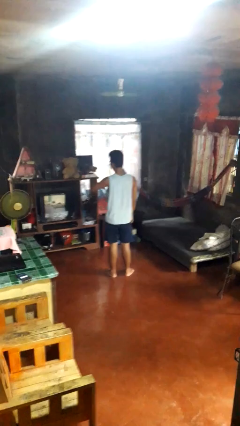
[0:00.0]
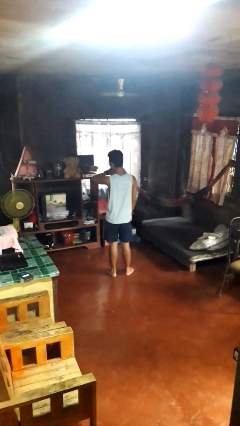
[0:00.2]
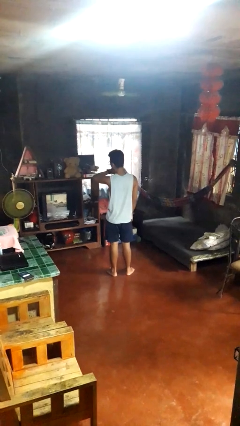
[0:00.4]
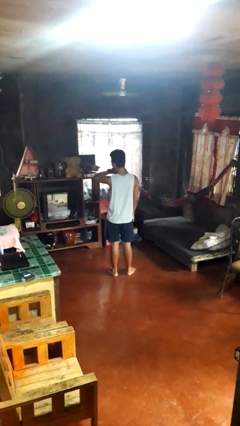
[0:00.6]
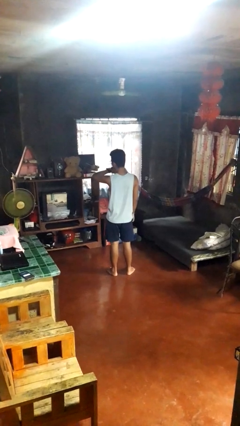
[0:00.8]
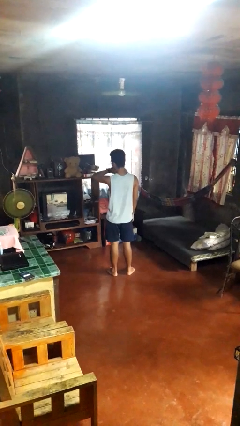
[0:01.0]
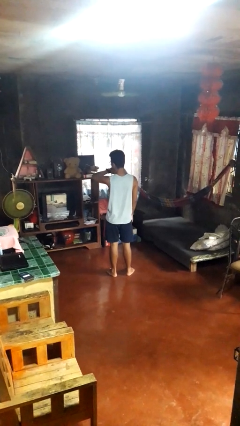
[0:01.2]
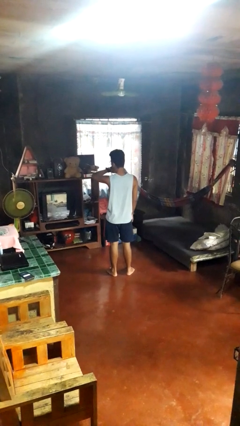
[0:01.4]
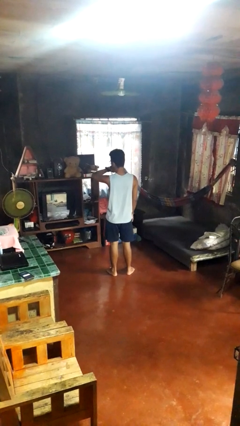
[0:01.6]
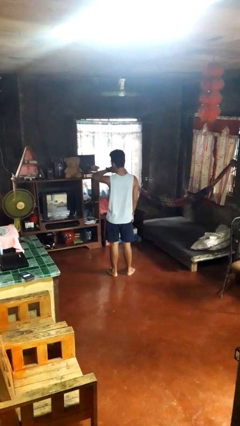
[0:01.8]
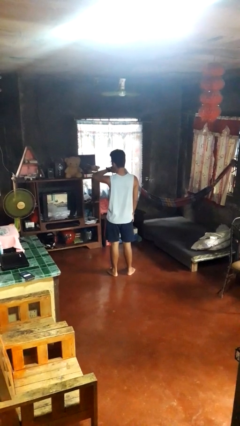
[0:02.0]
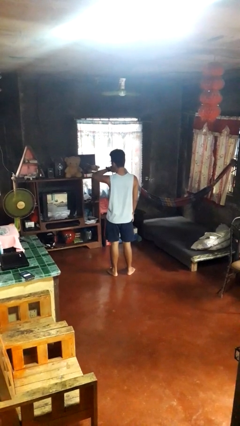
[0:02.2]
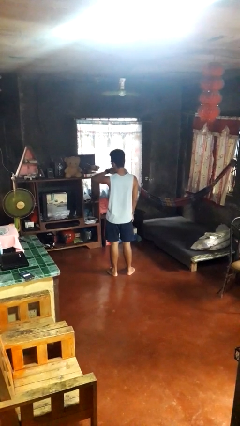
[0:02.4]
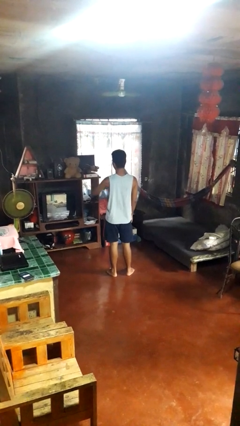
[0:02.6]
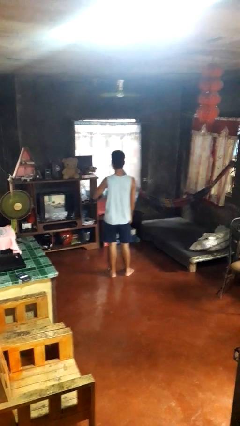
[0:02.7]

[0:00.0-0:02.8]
person looks at wristwatch

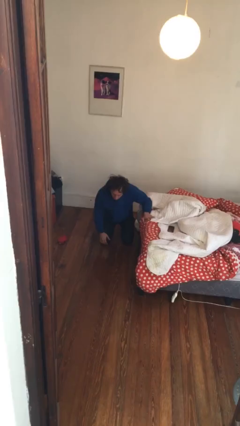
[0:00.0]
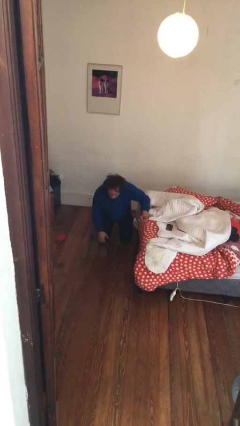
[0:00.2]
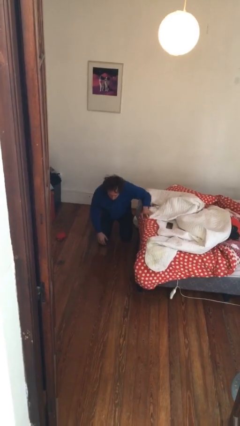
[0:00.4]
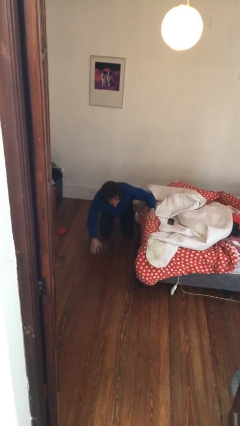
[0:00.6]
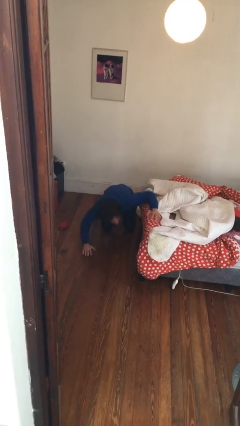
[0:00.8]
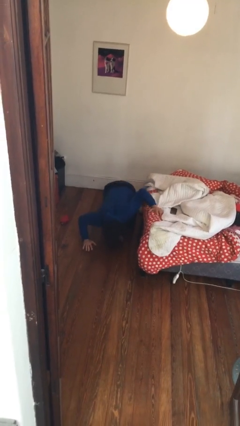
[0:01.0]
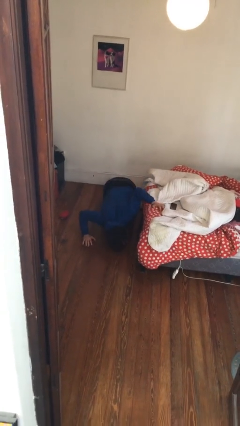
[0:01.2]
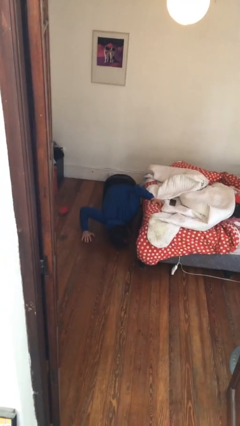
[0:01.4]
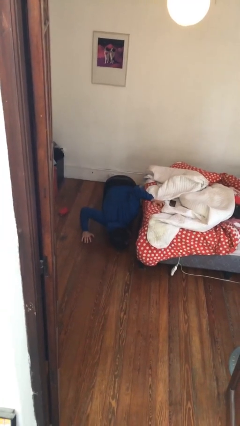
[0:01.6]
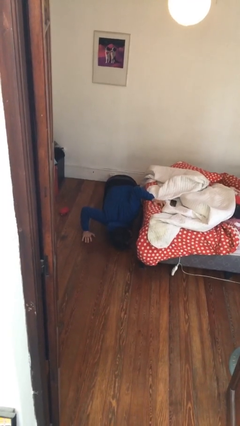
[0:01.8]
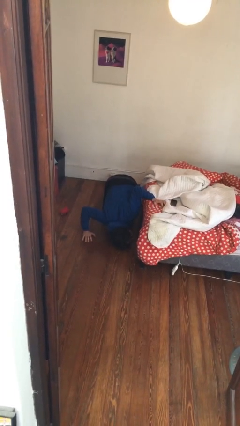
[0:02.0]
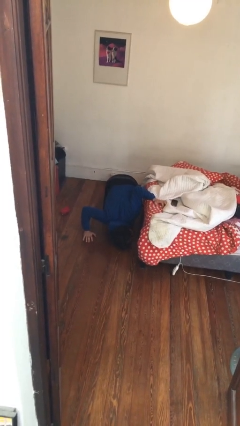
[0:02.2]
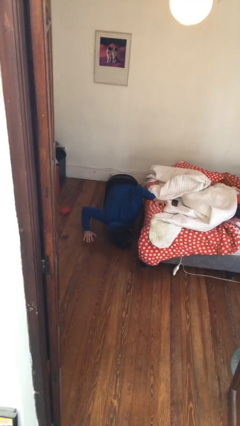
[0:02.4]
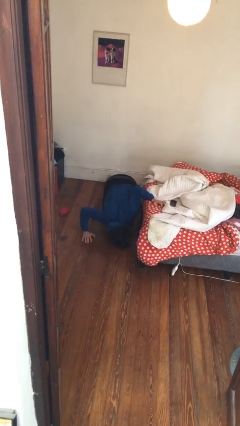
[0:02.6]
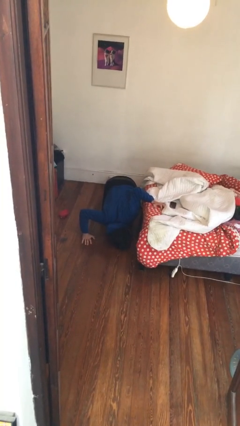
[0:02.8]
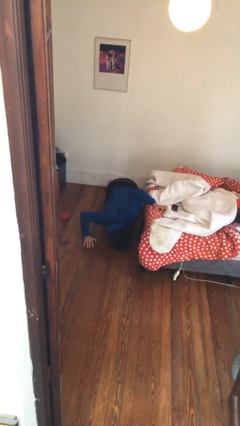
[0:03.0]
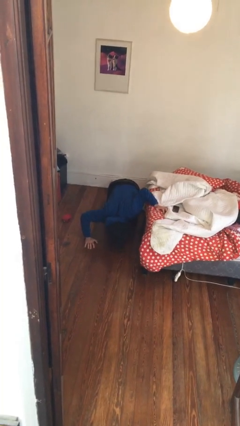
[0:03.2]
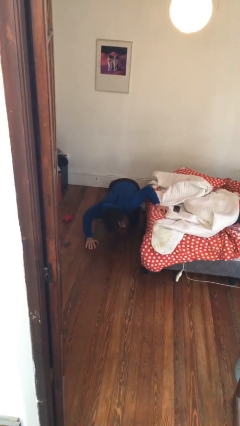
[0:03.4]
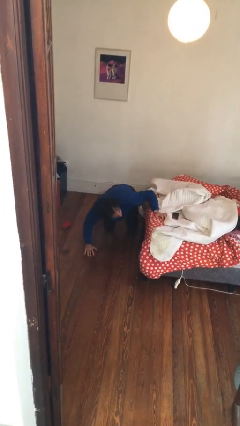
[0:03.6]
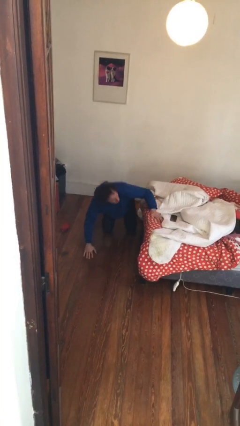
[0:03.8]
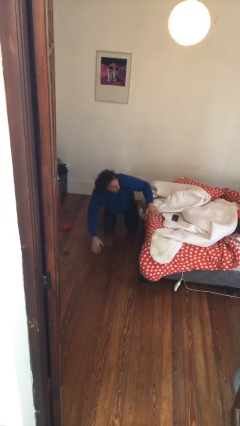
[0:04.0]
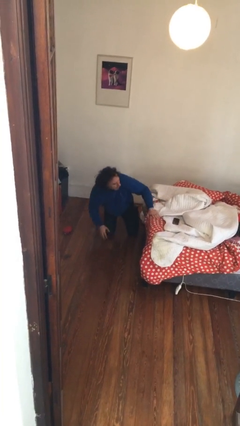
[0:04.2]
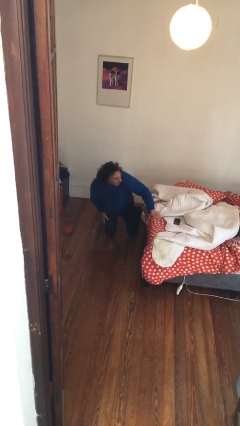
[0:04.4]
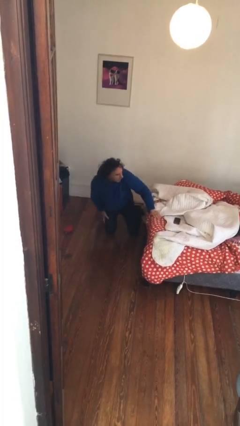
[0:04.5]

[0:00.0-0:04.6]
person searches under bed

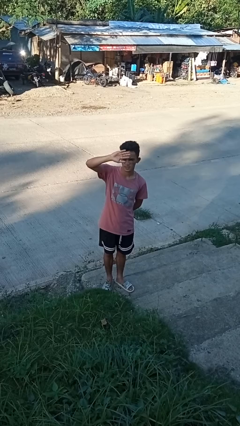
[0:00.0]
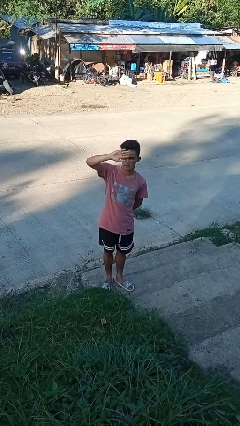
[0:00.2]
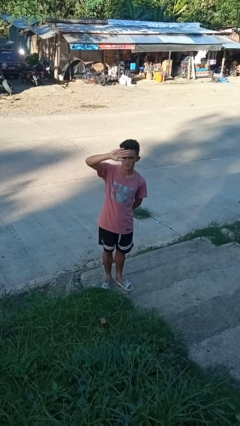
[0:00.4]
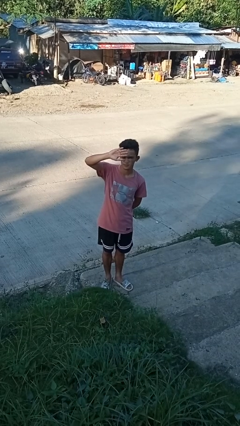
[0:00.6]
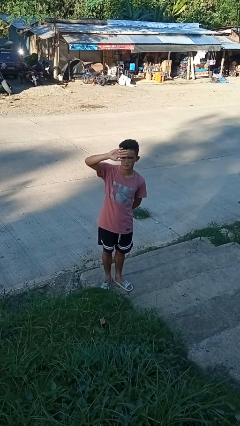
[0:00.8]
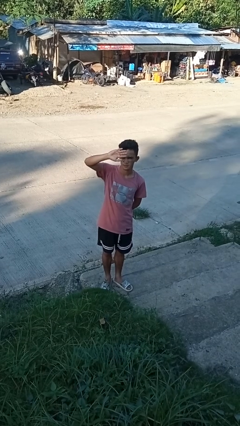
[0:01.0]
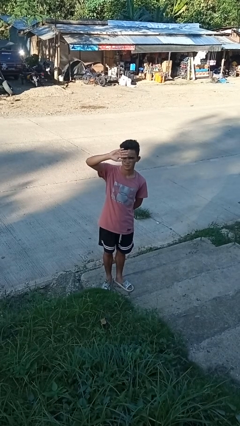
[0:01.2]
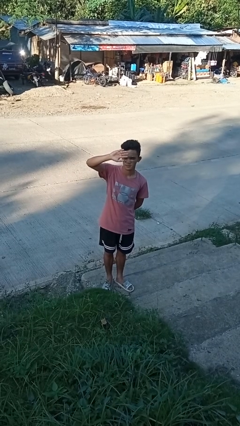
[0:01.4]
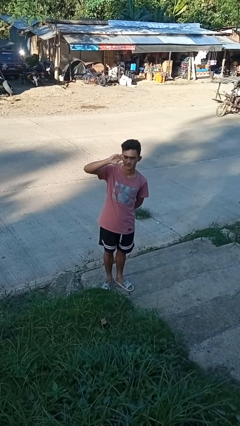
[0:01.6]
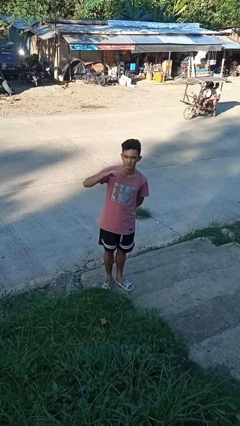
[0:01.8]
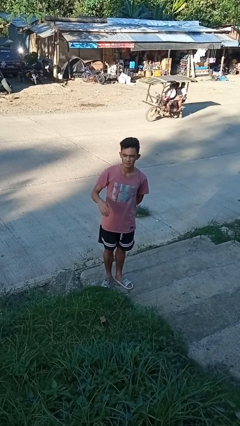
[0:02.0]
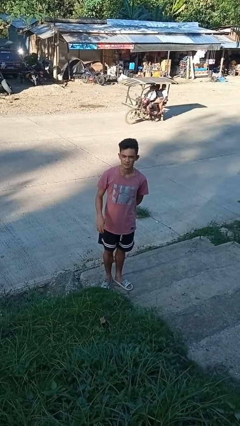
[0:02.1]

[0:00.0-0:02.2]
person shades eyes

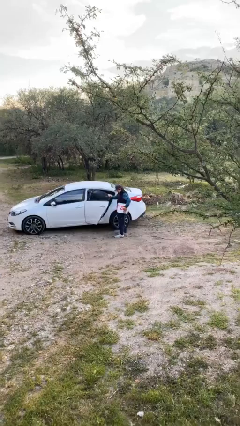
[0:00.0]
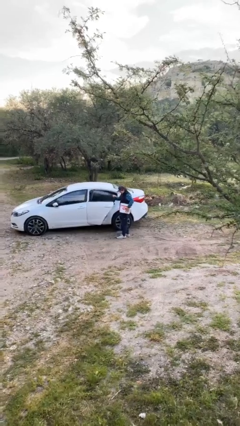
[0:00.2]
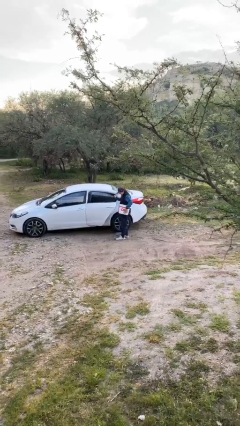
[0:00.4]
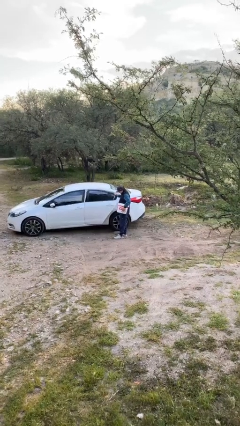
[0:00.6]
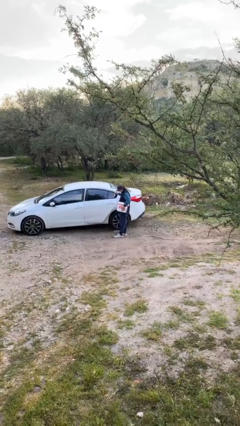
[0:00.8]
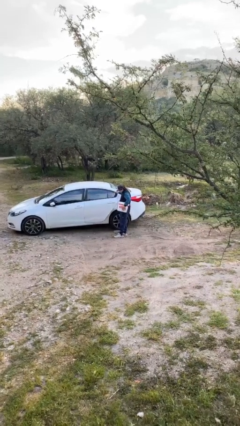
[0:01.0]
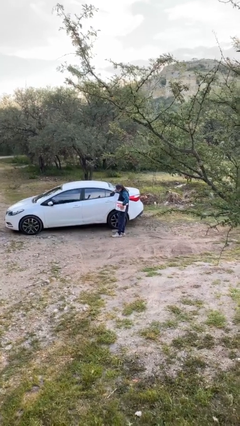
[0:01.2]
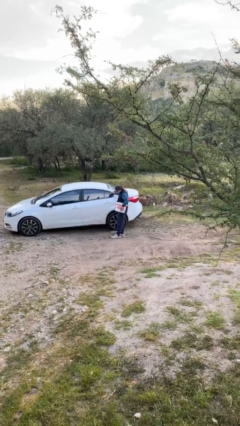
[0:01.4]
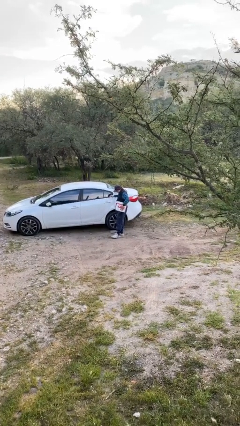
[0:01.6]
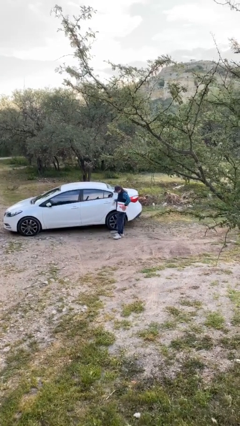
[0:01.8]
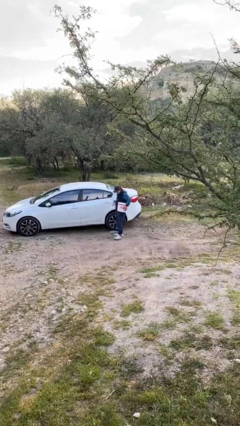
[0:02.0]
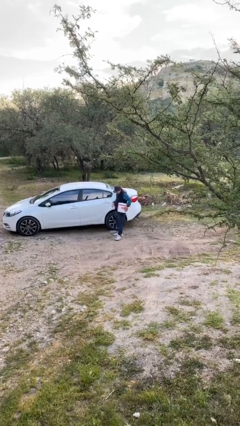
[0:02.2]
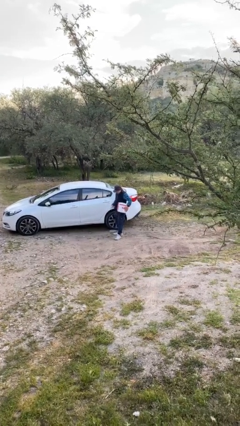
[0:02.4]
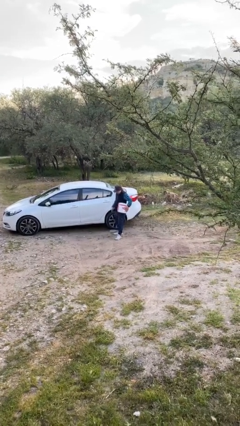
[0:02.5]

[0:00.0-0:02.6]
person closes car door

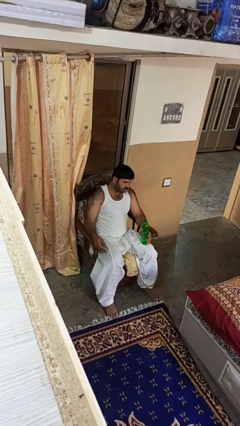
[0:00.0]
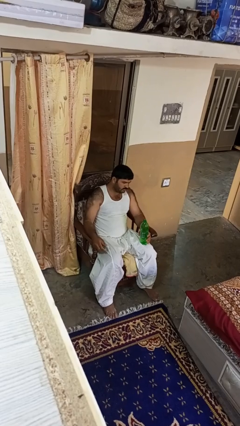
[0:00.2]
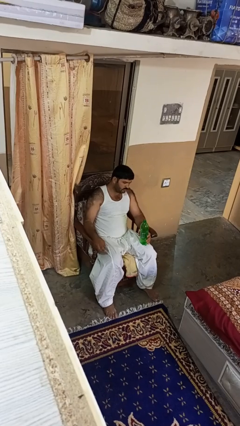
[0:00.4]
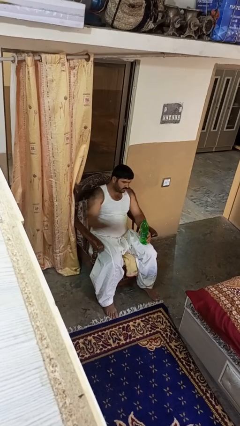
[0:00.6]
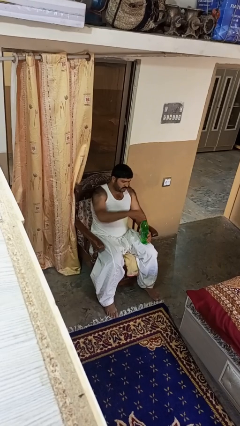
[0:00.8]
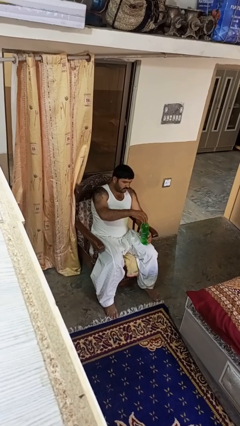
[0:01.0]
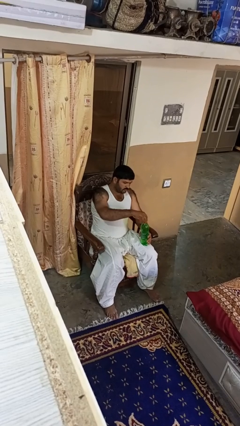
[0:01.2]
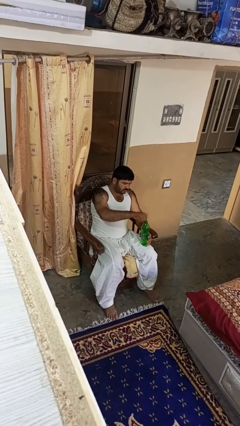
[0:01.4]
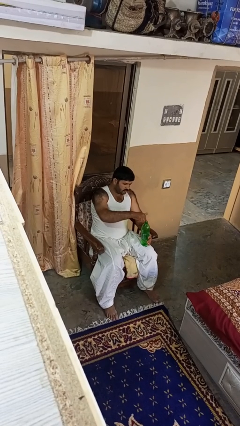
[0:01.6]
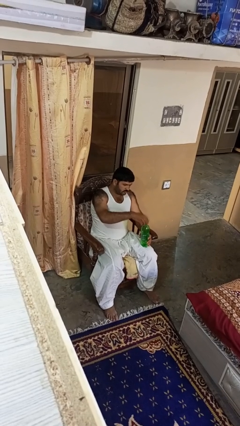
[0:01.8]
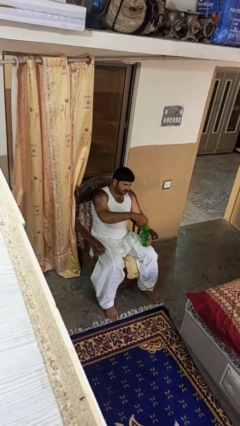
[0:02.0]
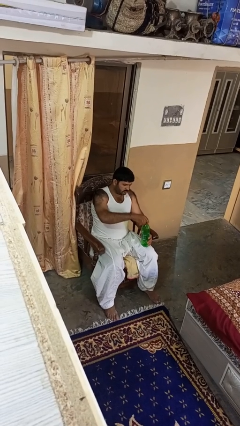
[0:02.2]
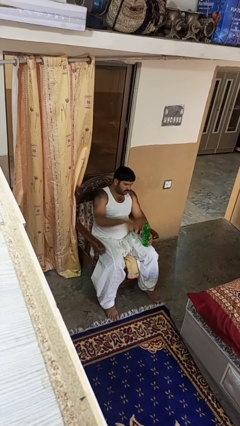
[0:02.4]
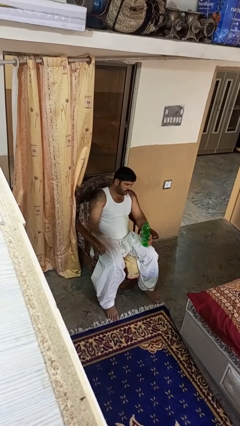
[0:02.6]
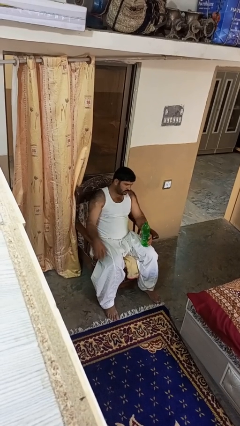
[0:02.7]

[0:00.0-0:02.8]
person screws lid to bottle

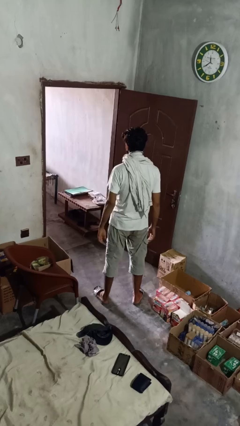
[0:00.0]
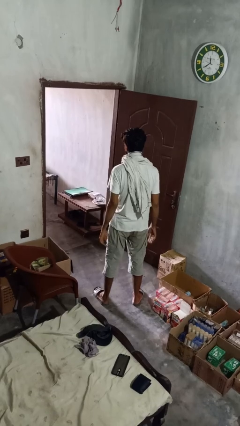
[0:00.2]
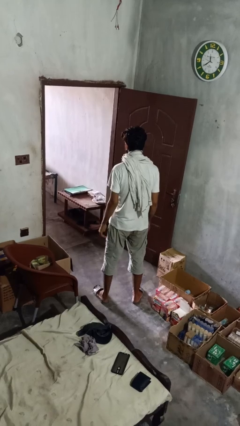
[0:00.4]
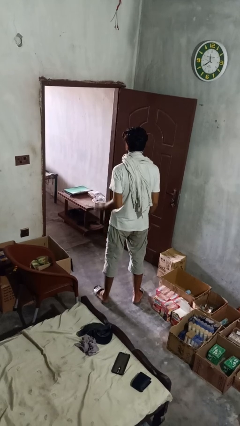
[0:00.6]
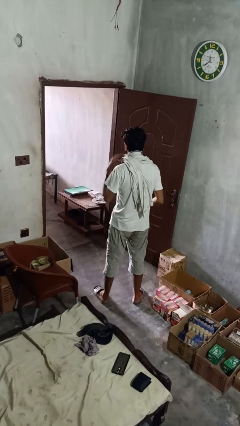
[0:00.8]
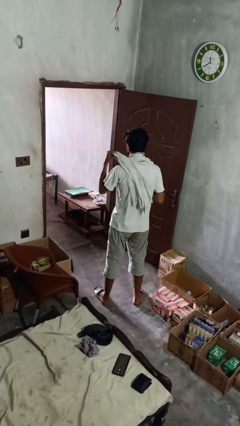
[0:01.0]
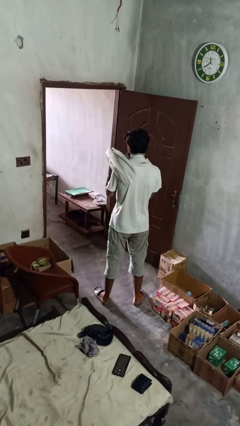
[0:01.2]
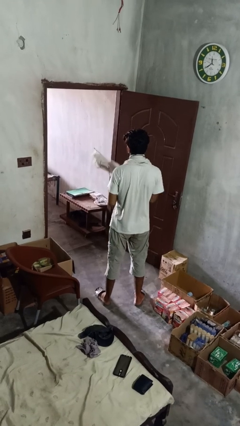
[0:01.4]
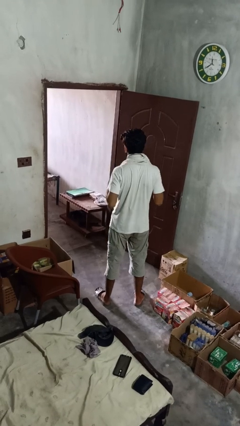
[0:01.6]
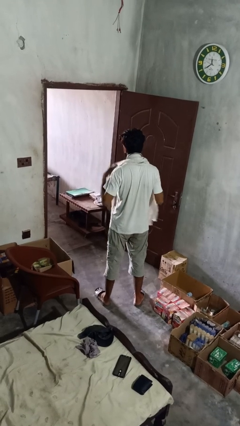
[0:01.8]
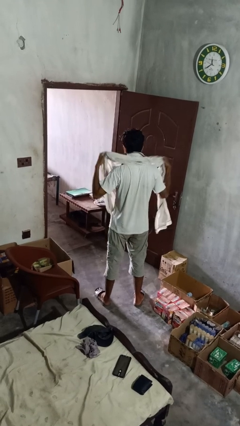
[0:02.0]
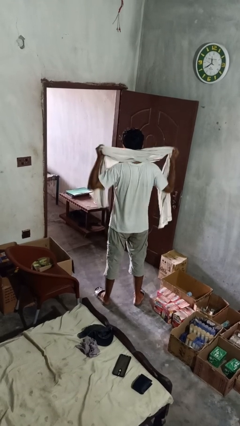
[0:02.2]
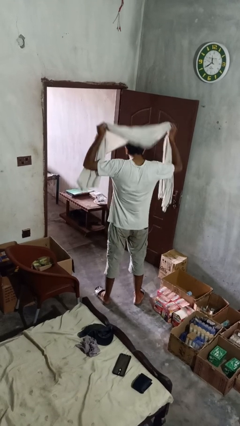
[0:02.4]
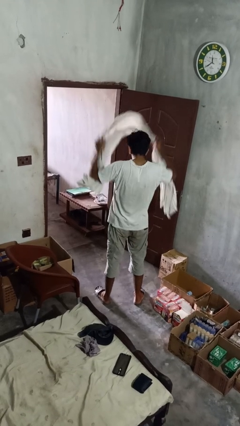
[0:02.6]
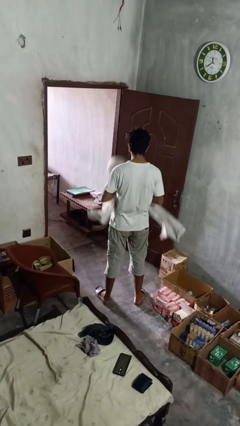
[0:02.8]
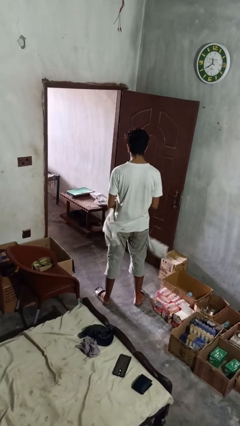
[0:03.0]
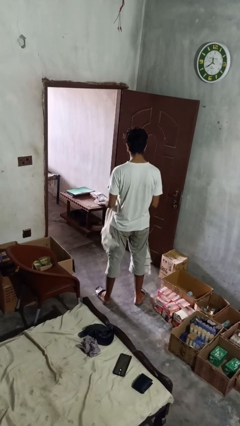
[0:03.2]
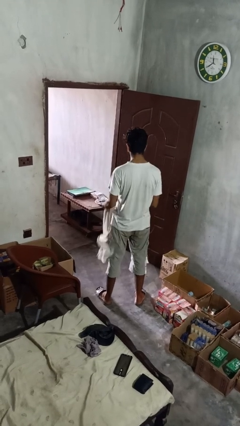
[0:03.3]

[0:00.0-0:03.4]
person takes off scarf
